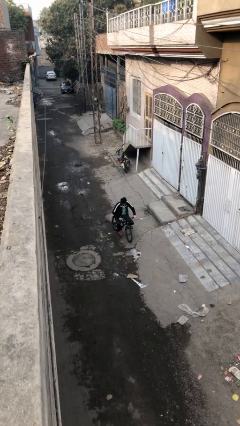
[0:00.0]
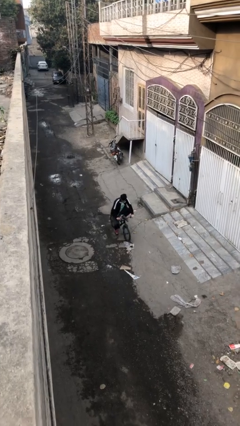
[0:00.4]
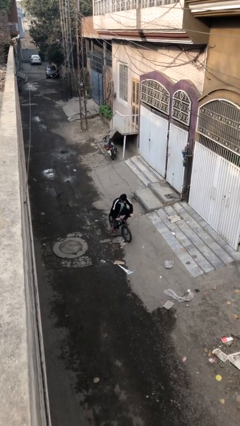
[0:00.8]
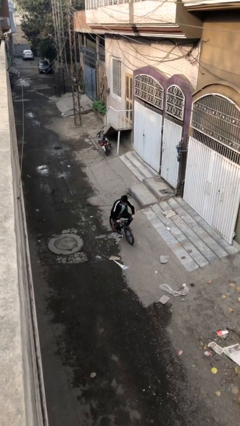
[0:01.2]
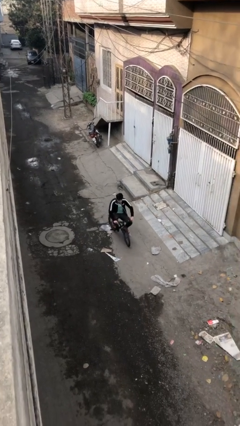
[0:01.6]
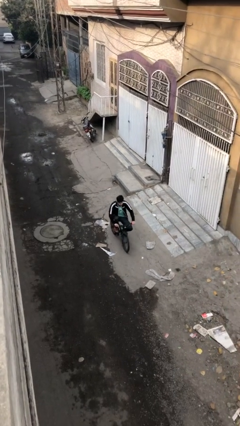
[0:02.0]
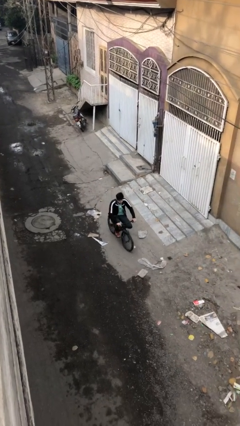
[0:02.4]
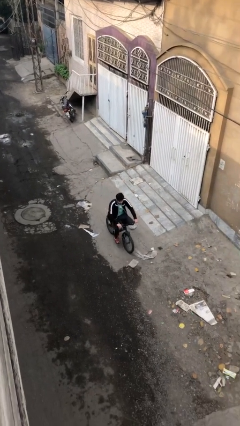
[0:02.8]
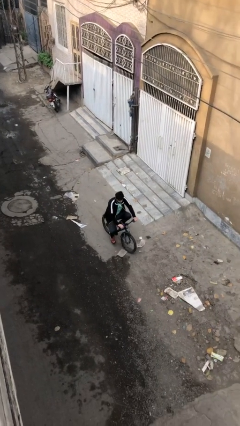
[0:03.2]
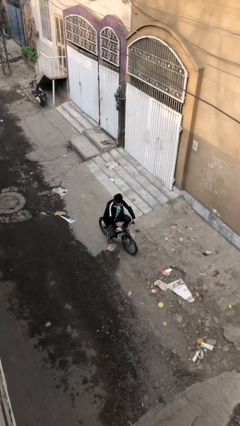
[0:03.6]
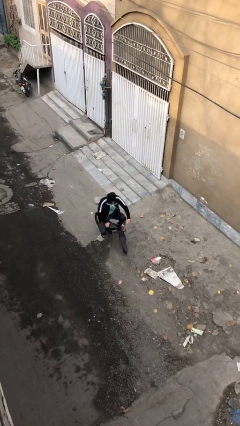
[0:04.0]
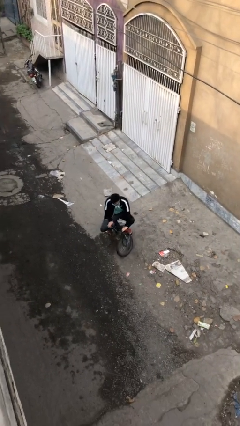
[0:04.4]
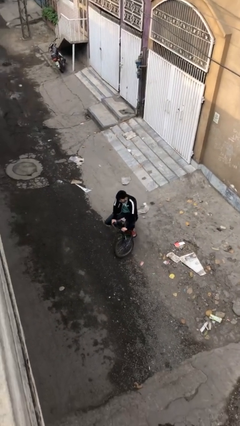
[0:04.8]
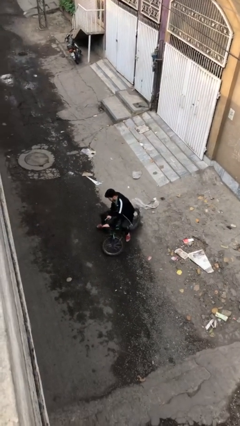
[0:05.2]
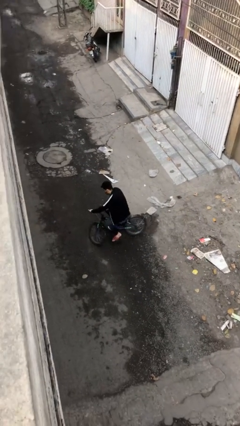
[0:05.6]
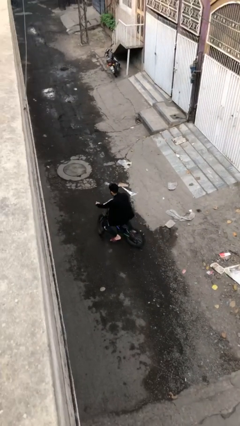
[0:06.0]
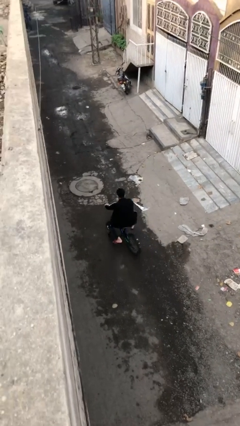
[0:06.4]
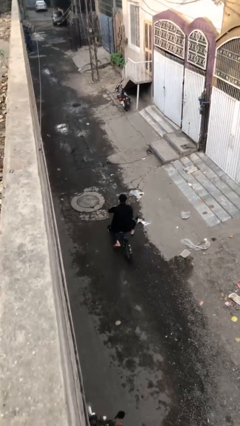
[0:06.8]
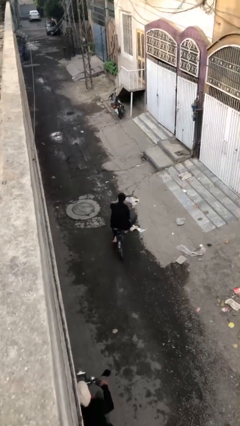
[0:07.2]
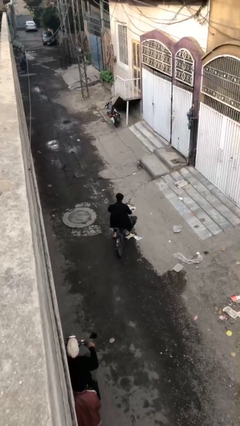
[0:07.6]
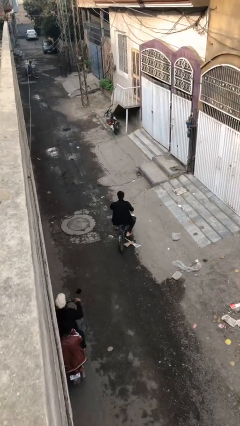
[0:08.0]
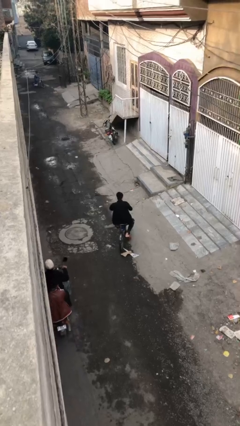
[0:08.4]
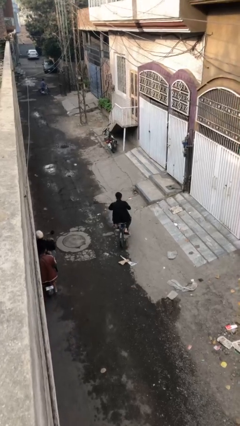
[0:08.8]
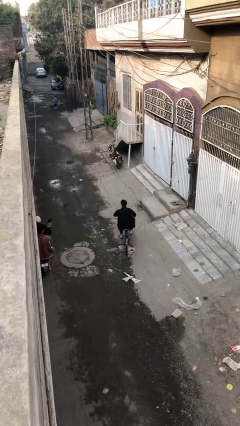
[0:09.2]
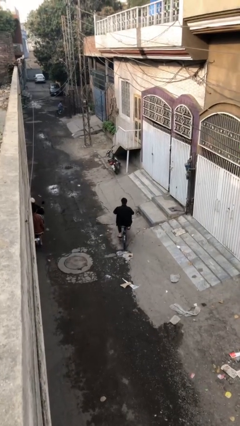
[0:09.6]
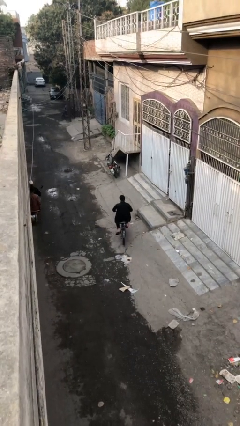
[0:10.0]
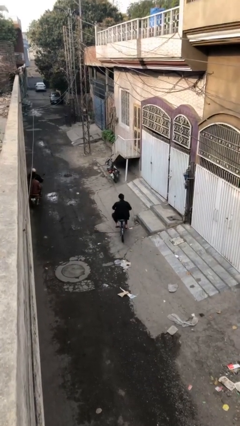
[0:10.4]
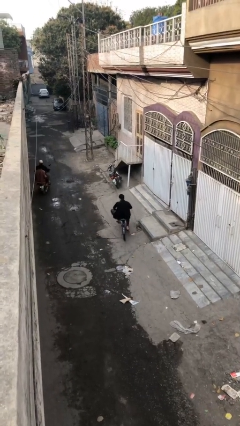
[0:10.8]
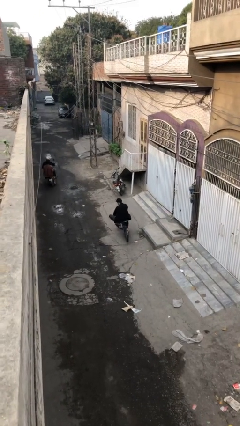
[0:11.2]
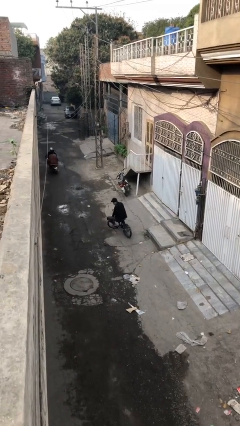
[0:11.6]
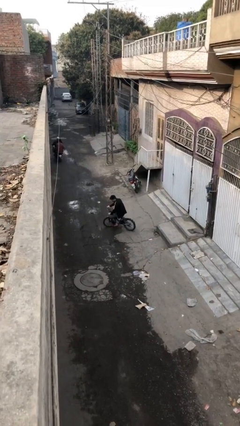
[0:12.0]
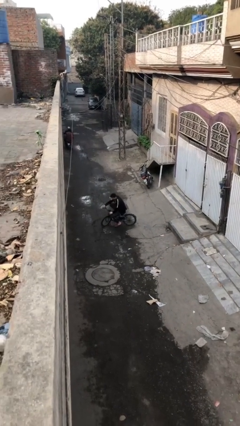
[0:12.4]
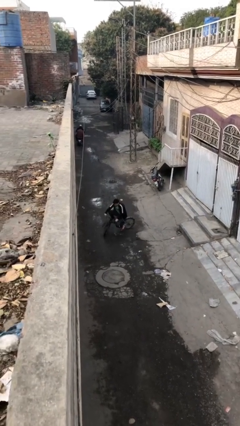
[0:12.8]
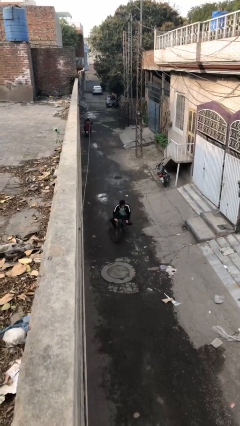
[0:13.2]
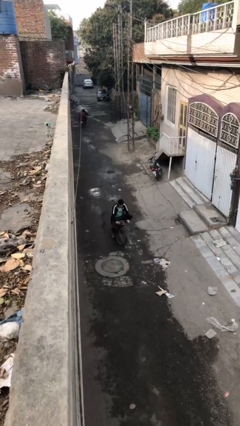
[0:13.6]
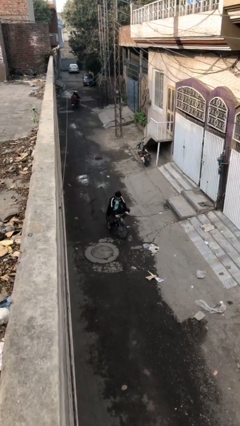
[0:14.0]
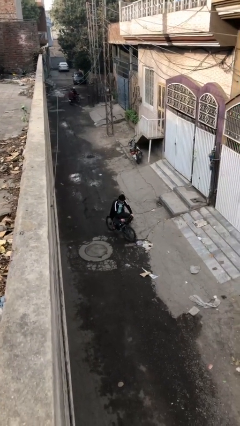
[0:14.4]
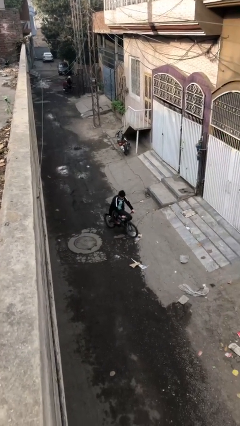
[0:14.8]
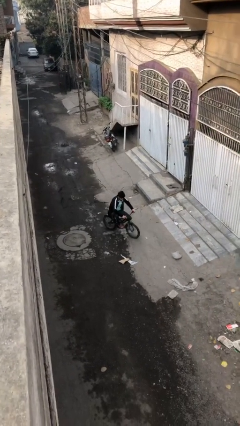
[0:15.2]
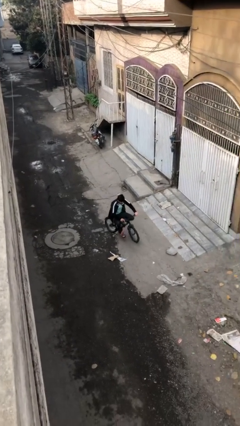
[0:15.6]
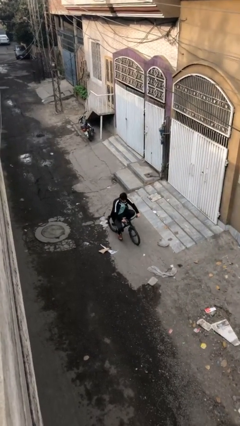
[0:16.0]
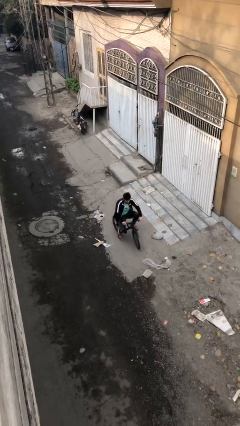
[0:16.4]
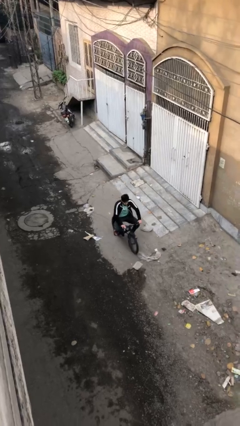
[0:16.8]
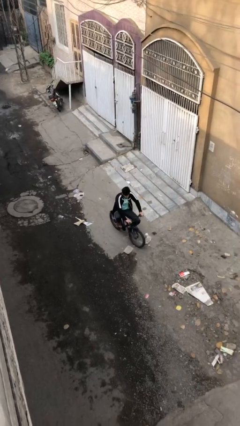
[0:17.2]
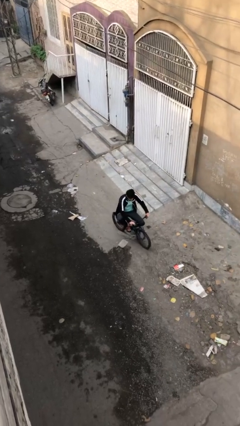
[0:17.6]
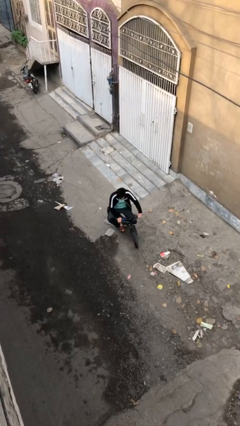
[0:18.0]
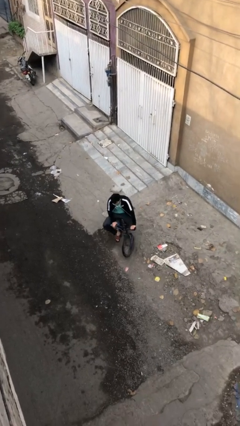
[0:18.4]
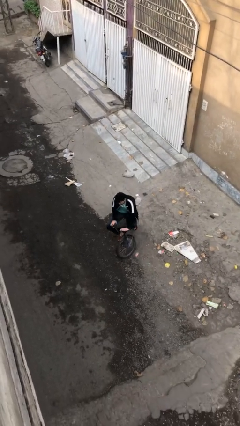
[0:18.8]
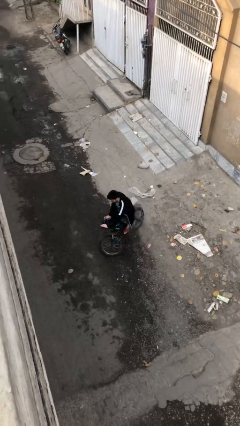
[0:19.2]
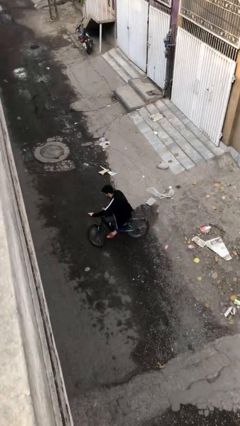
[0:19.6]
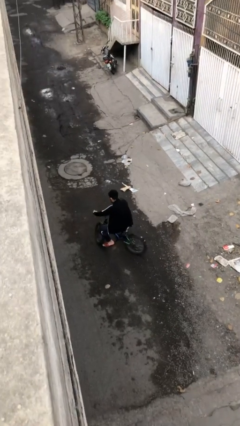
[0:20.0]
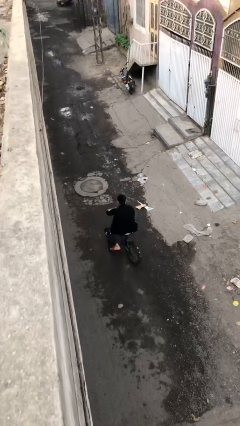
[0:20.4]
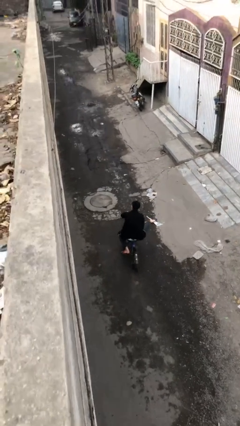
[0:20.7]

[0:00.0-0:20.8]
person rides bicycle

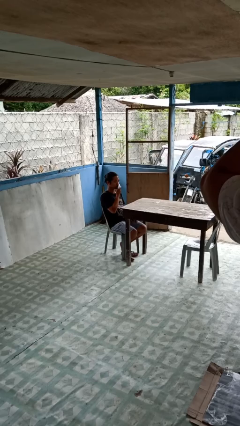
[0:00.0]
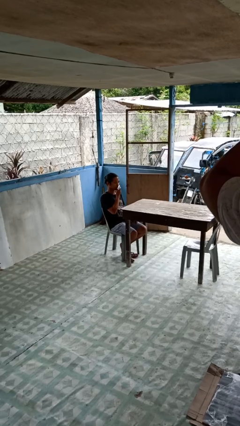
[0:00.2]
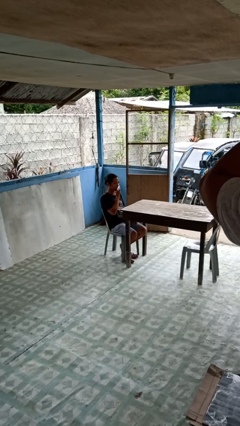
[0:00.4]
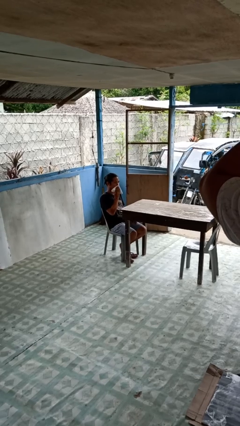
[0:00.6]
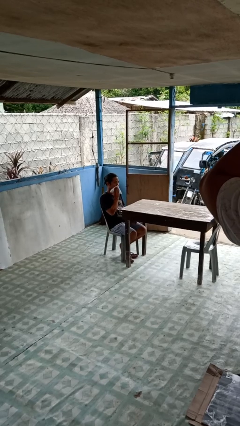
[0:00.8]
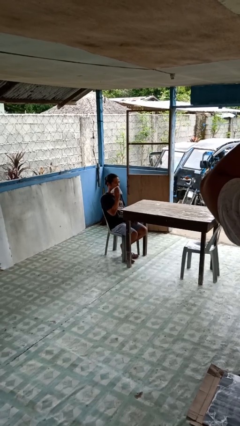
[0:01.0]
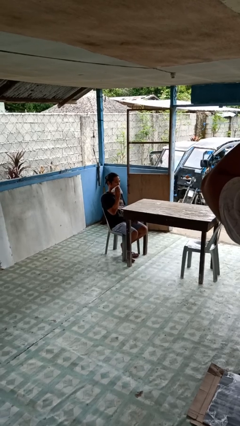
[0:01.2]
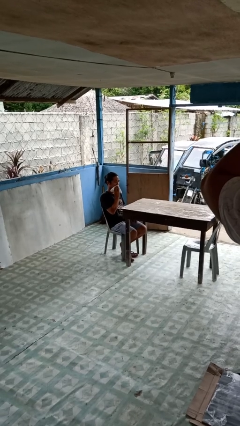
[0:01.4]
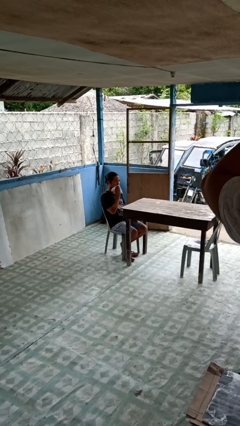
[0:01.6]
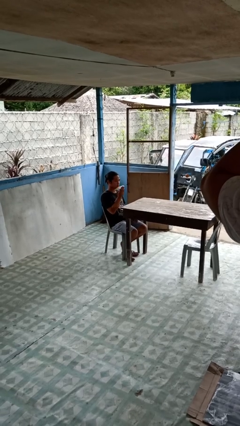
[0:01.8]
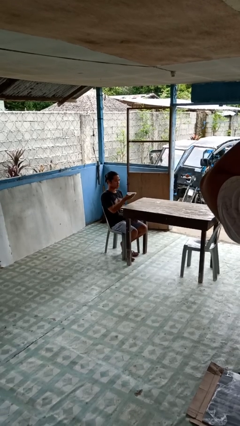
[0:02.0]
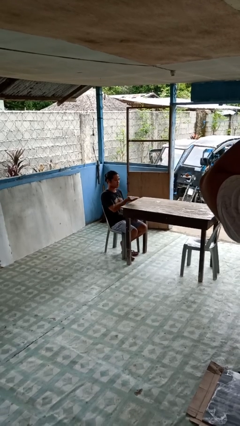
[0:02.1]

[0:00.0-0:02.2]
person wipes mouth with napkin

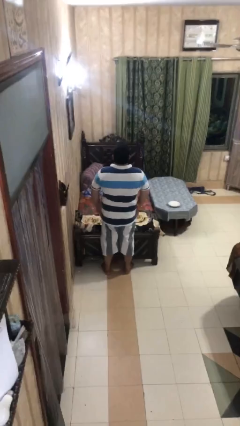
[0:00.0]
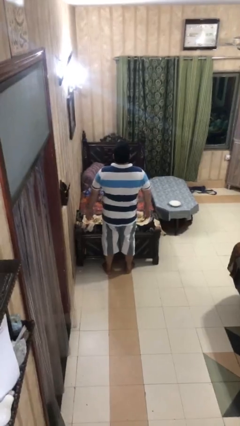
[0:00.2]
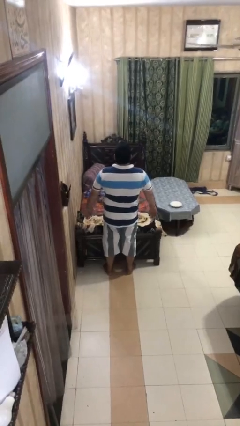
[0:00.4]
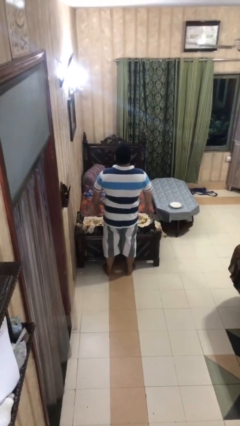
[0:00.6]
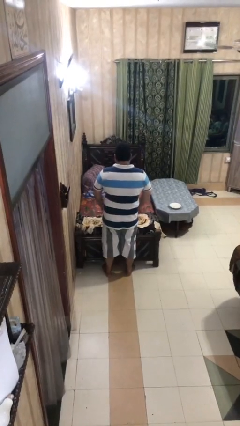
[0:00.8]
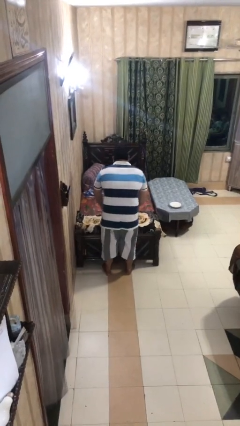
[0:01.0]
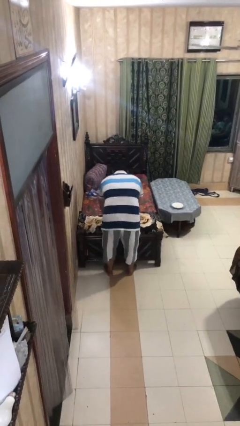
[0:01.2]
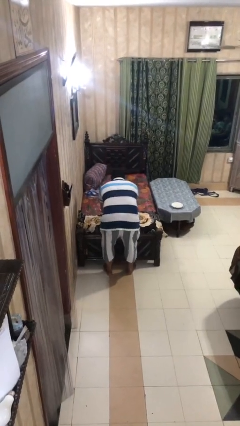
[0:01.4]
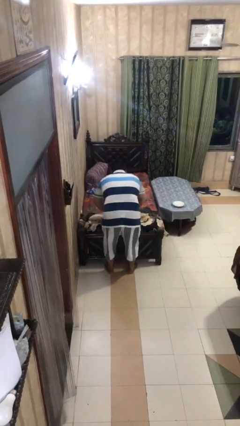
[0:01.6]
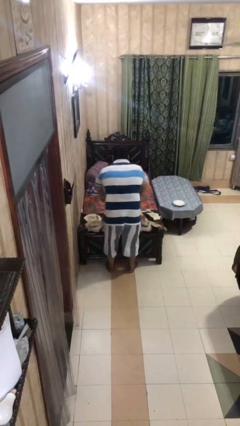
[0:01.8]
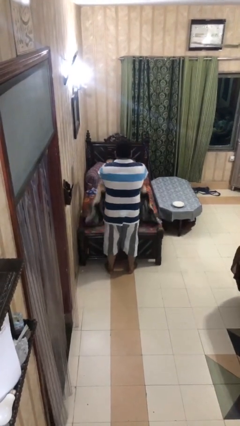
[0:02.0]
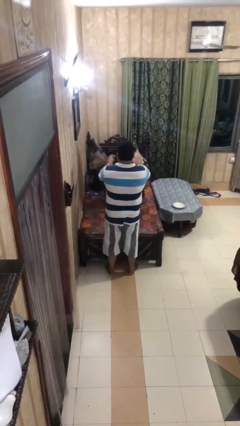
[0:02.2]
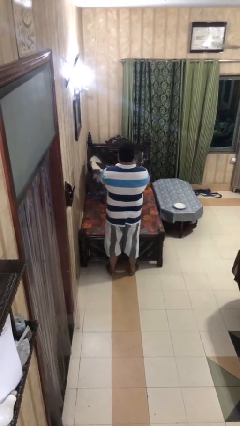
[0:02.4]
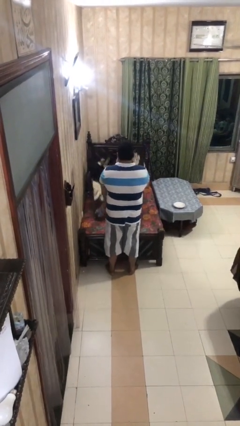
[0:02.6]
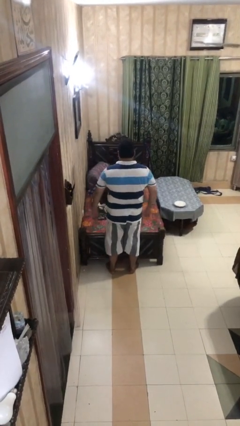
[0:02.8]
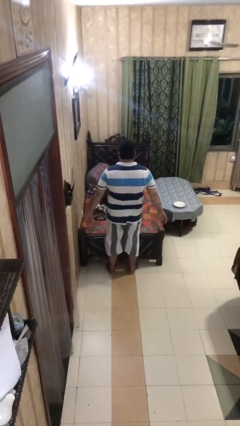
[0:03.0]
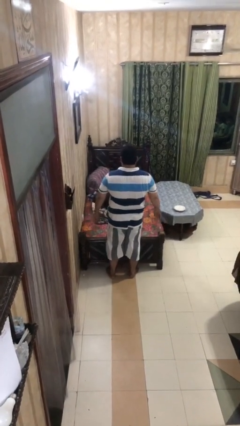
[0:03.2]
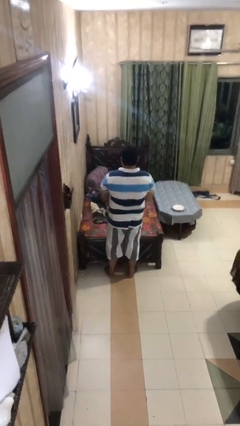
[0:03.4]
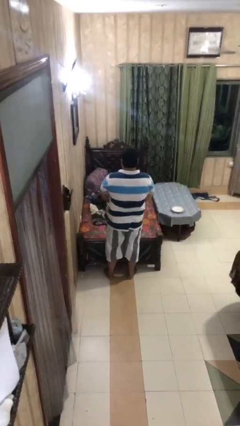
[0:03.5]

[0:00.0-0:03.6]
person unfolds blanket

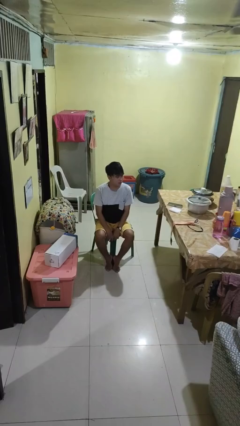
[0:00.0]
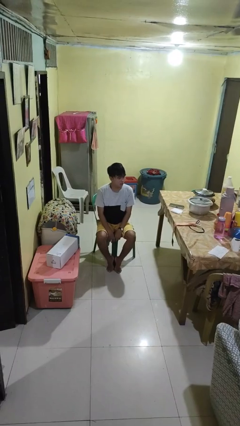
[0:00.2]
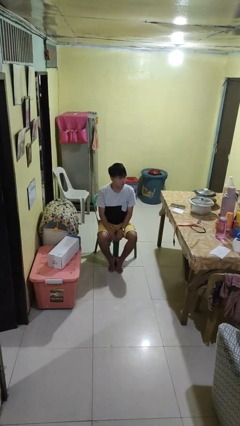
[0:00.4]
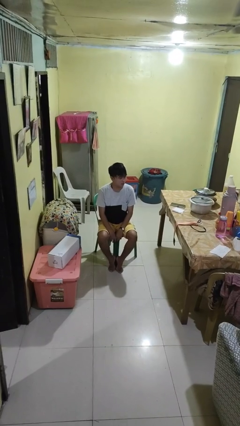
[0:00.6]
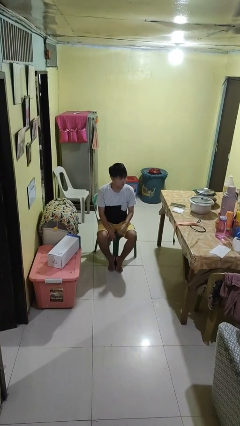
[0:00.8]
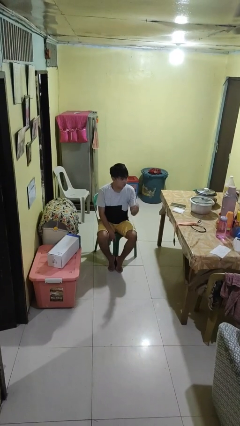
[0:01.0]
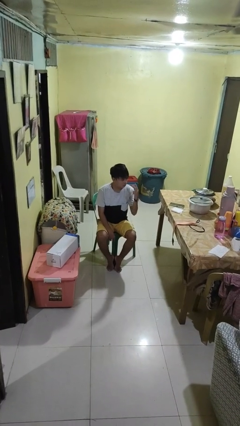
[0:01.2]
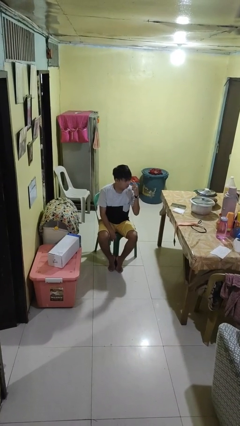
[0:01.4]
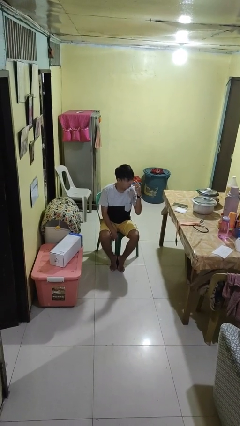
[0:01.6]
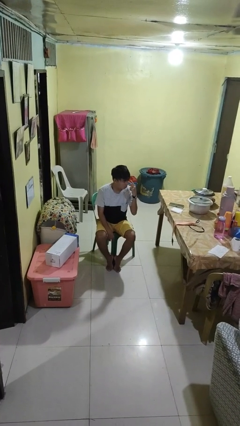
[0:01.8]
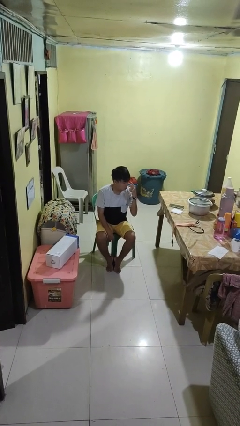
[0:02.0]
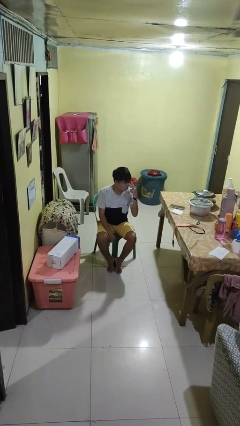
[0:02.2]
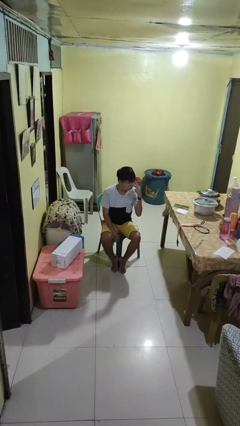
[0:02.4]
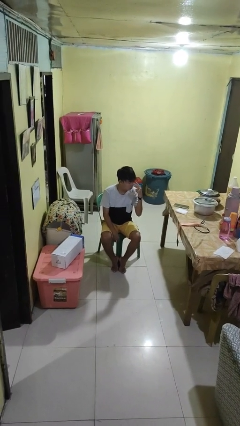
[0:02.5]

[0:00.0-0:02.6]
person gestures watch closely
